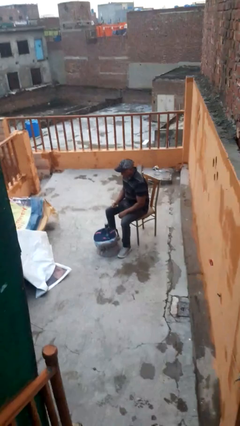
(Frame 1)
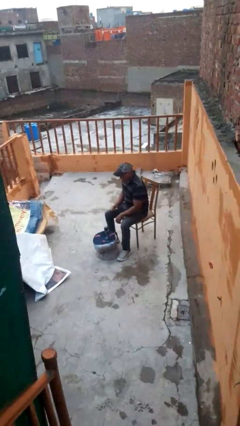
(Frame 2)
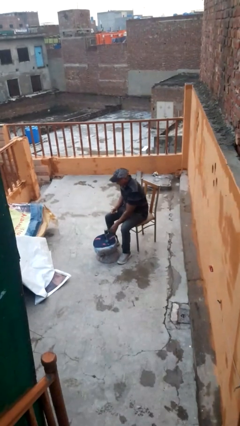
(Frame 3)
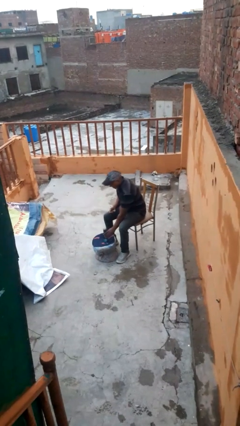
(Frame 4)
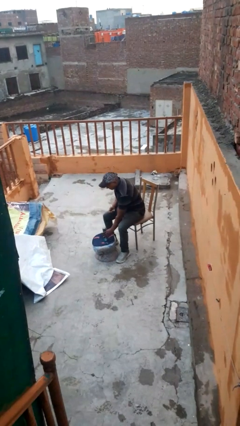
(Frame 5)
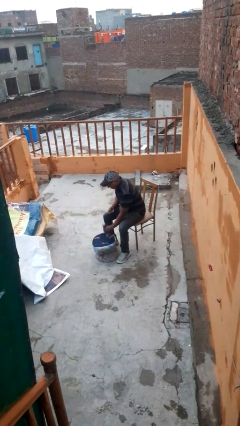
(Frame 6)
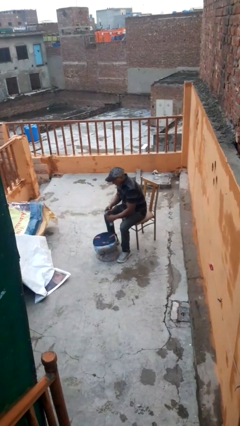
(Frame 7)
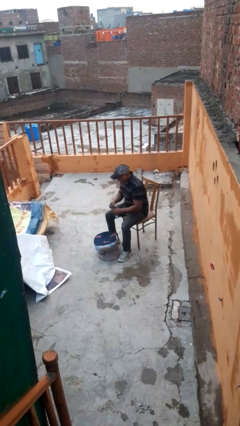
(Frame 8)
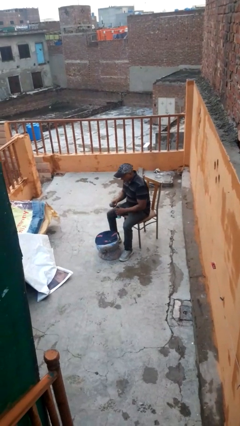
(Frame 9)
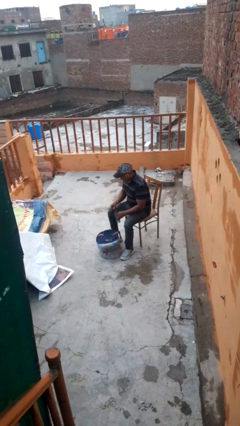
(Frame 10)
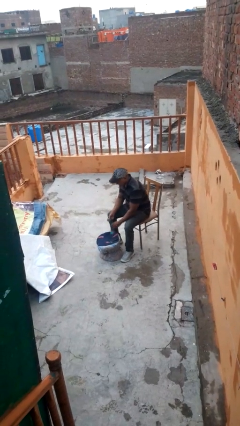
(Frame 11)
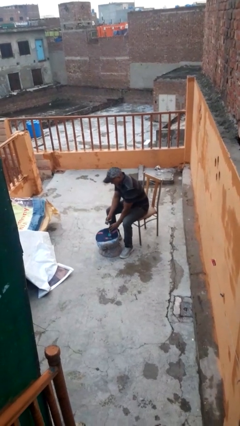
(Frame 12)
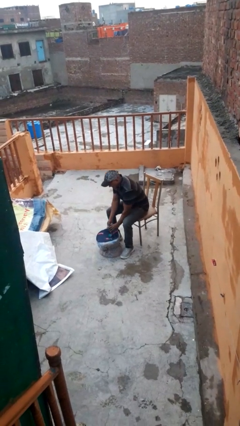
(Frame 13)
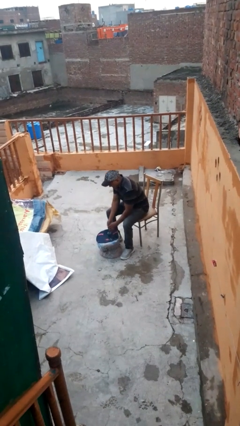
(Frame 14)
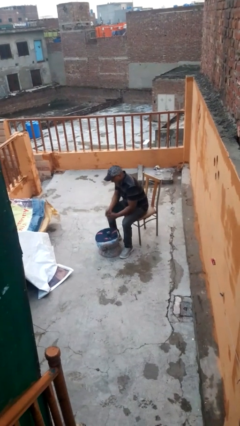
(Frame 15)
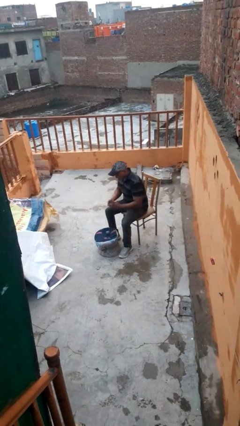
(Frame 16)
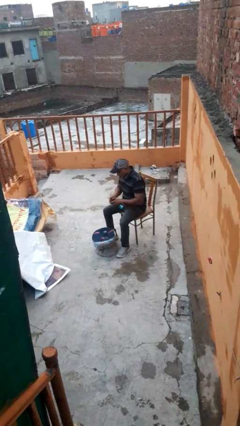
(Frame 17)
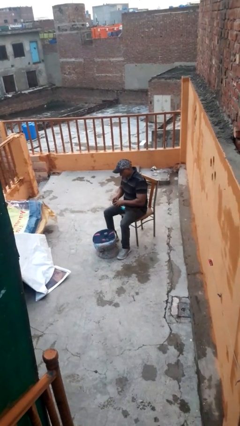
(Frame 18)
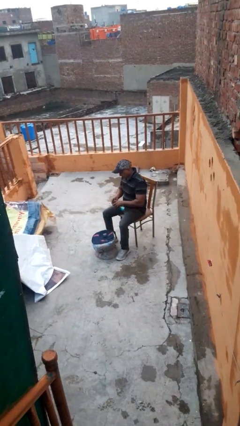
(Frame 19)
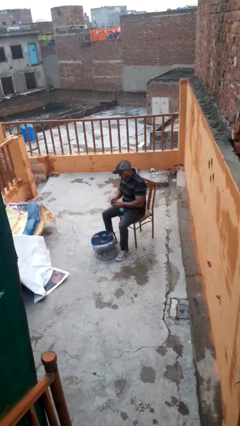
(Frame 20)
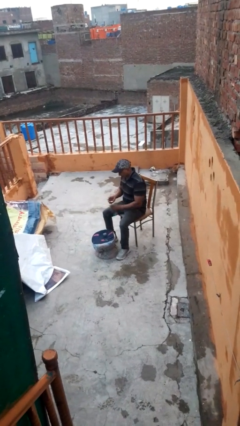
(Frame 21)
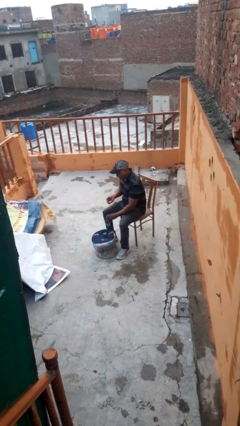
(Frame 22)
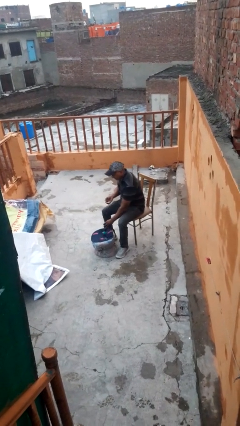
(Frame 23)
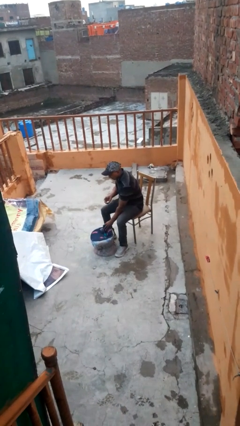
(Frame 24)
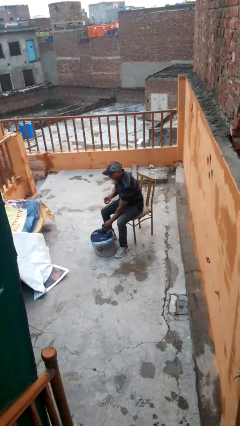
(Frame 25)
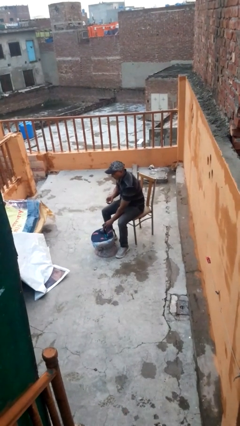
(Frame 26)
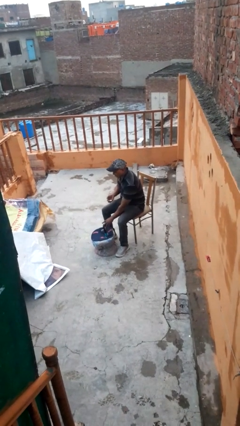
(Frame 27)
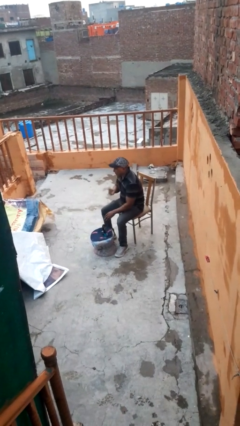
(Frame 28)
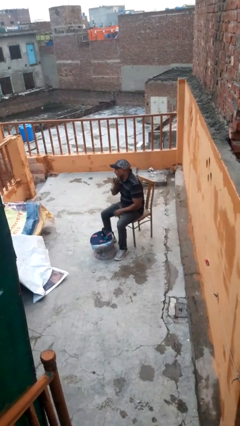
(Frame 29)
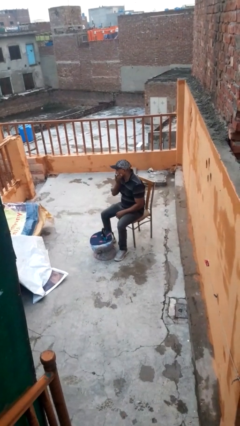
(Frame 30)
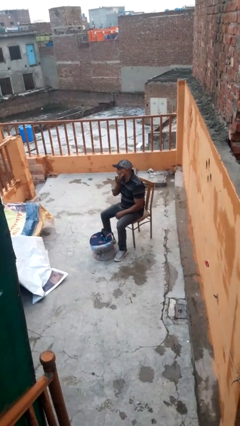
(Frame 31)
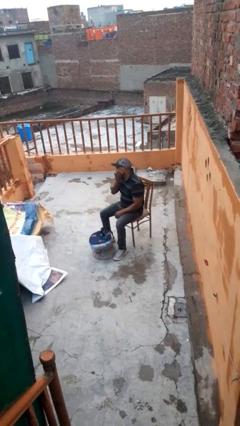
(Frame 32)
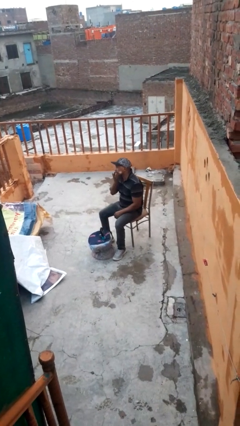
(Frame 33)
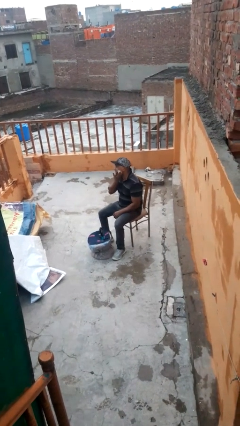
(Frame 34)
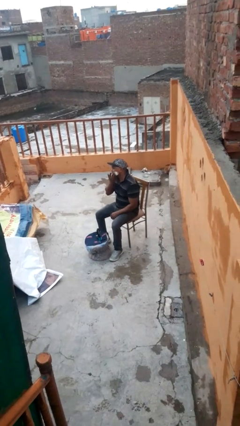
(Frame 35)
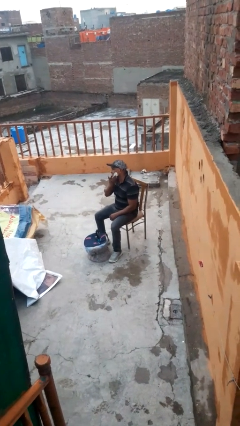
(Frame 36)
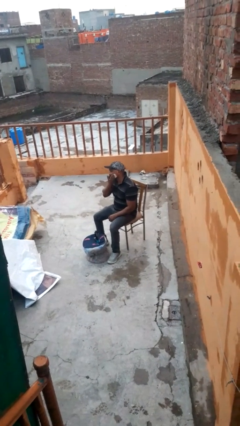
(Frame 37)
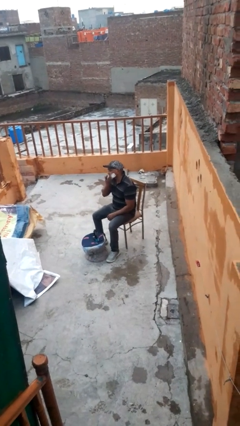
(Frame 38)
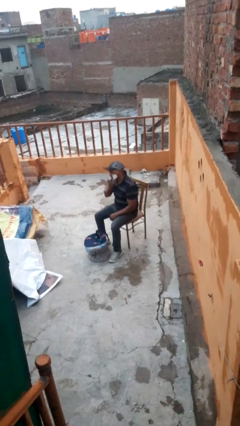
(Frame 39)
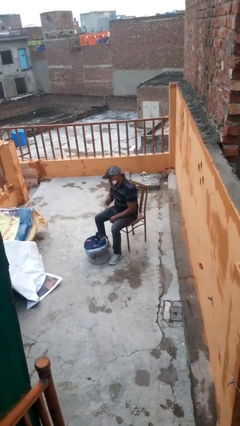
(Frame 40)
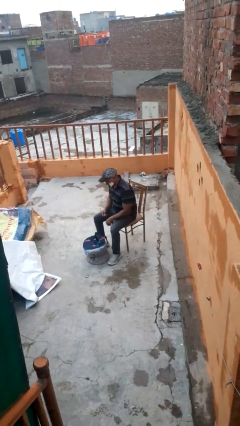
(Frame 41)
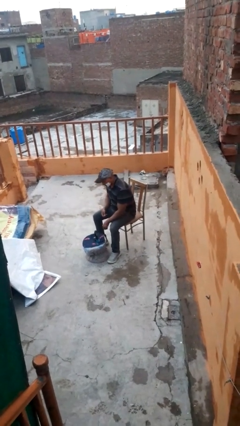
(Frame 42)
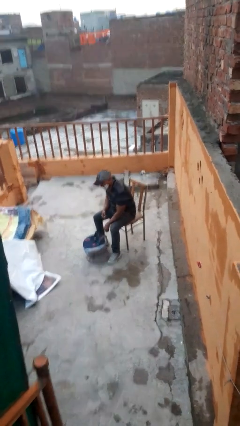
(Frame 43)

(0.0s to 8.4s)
person applies shaving cream

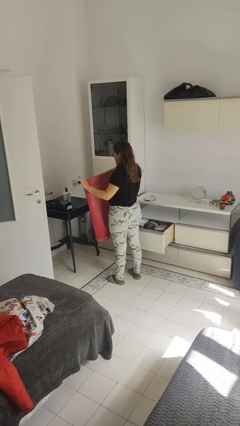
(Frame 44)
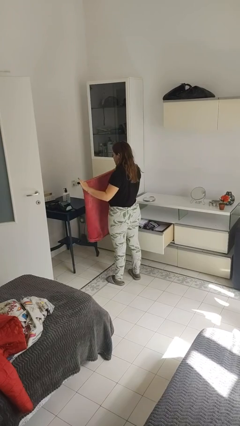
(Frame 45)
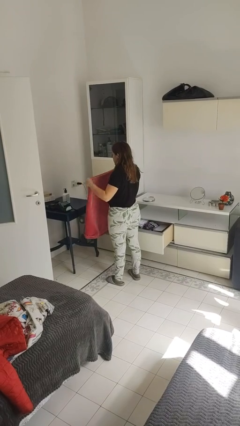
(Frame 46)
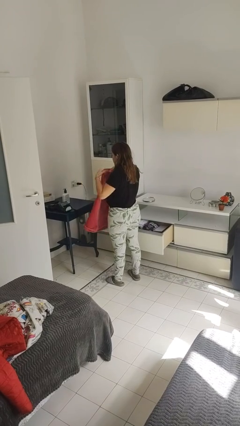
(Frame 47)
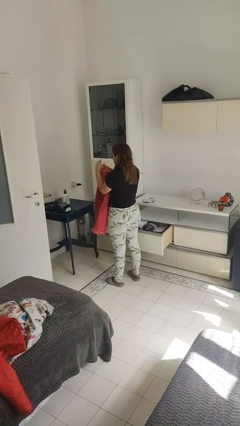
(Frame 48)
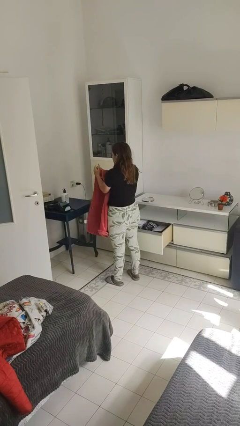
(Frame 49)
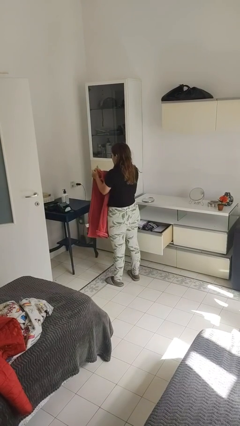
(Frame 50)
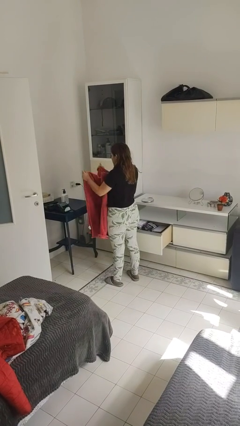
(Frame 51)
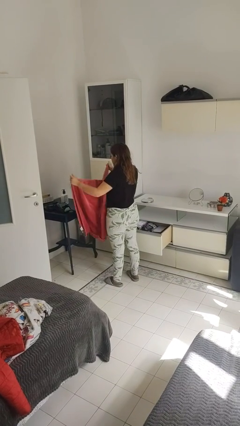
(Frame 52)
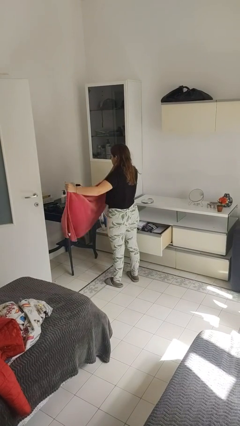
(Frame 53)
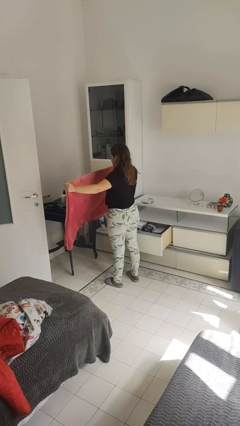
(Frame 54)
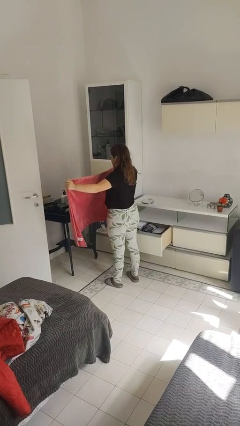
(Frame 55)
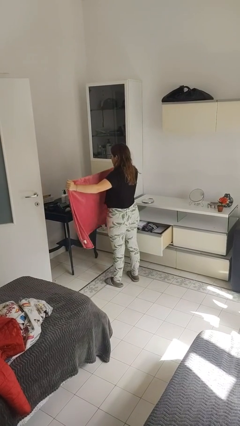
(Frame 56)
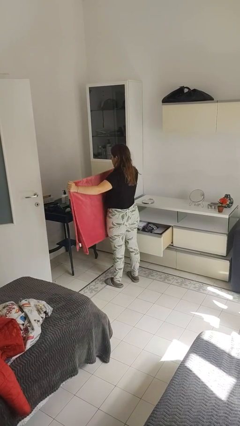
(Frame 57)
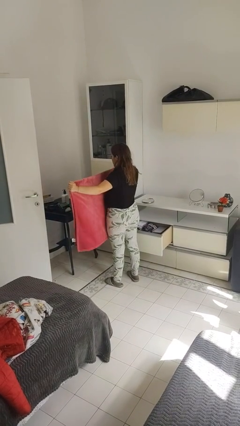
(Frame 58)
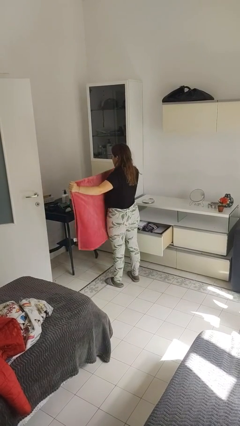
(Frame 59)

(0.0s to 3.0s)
person unfolds blanket

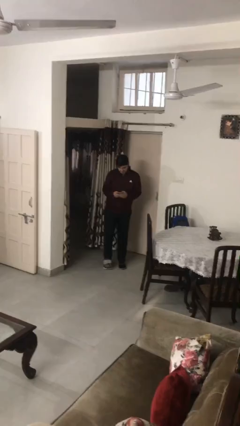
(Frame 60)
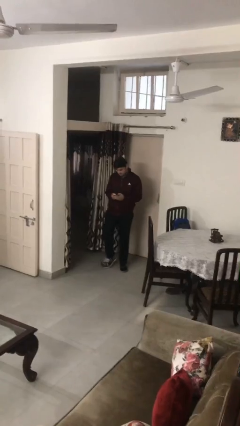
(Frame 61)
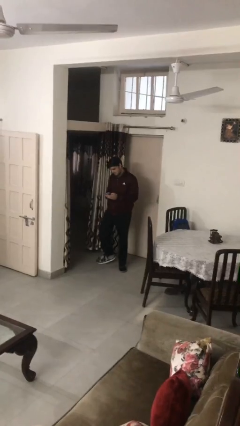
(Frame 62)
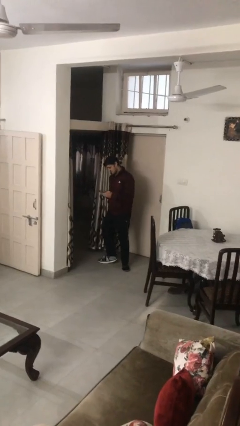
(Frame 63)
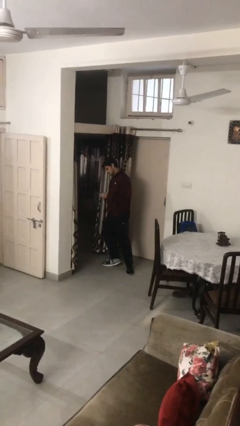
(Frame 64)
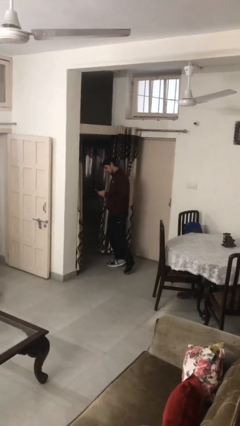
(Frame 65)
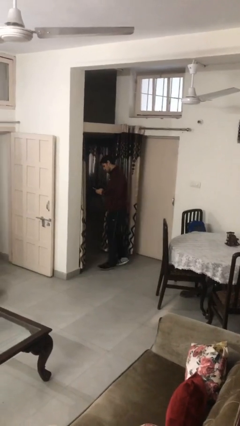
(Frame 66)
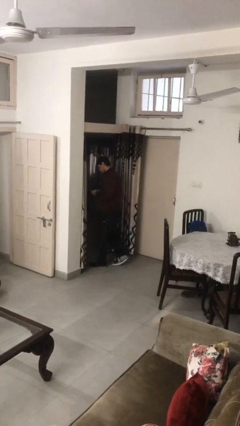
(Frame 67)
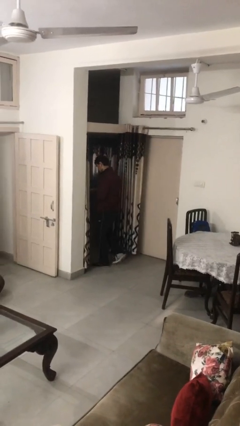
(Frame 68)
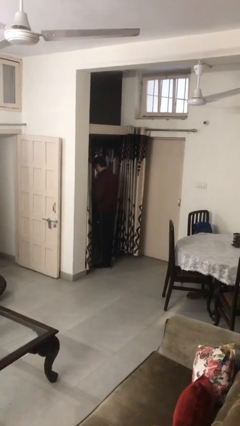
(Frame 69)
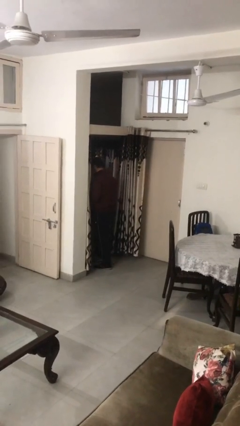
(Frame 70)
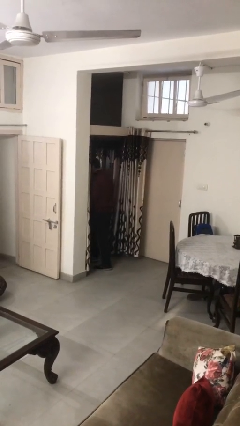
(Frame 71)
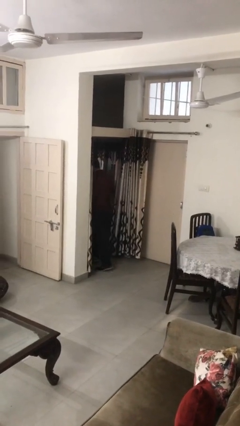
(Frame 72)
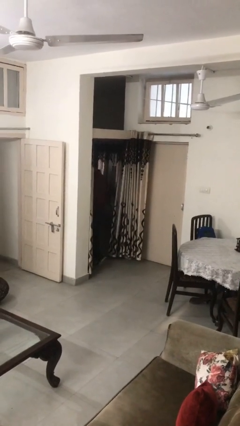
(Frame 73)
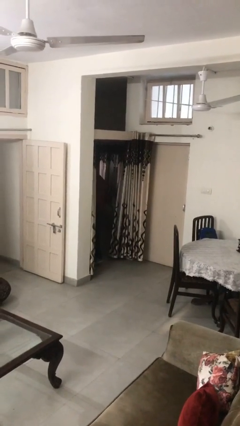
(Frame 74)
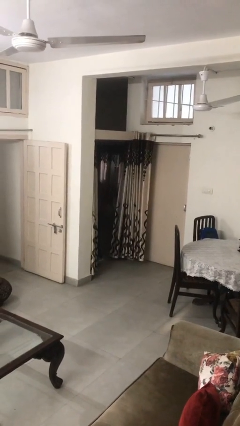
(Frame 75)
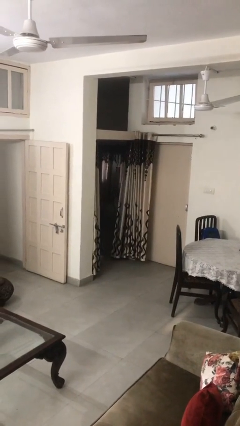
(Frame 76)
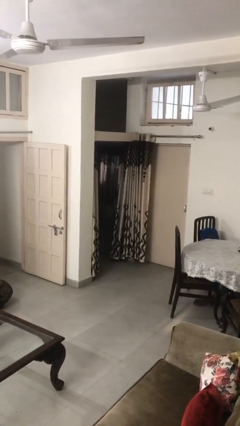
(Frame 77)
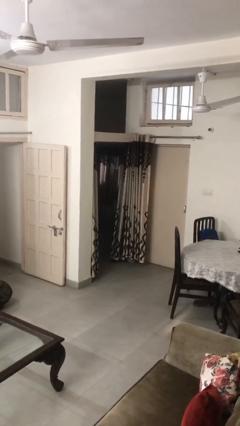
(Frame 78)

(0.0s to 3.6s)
person exits scene through structure

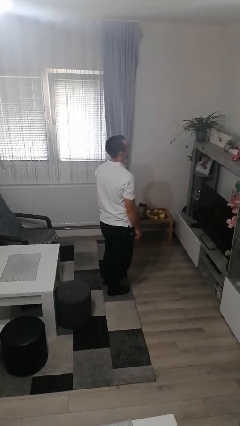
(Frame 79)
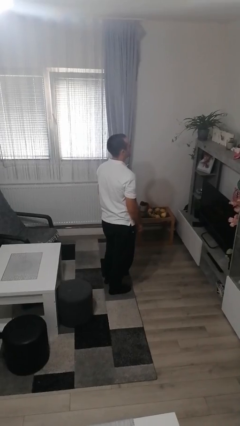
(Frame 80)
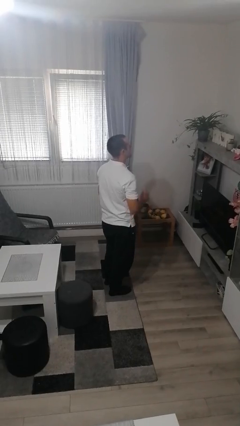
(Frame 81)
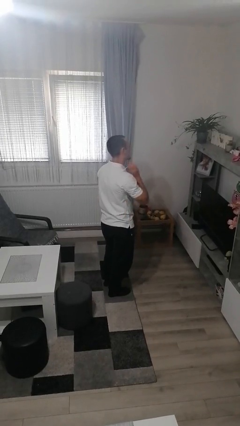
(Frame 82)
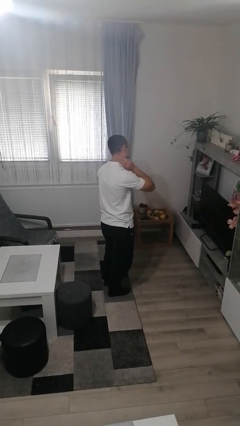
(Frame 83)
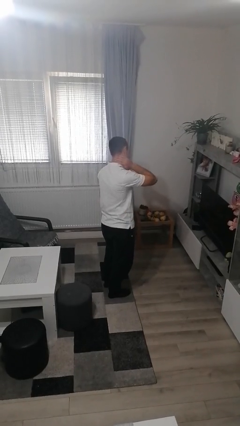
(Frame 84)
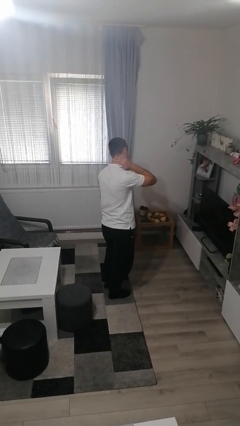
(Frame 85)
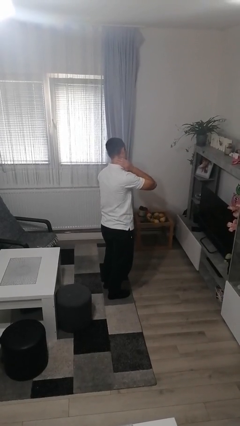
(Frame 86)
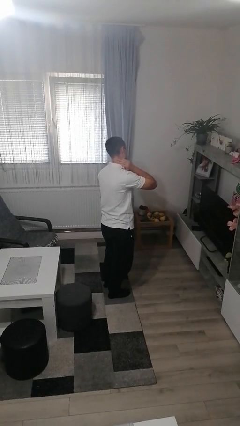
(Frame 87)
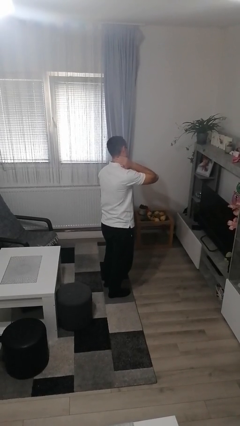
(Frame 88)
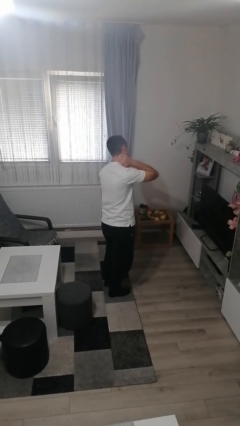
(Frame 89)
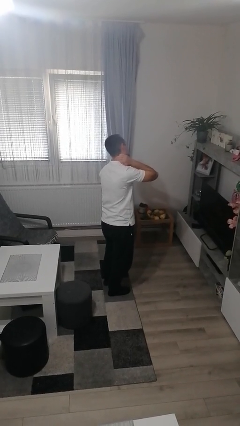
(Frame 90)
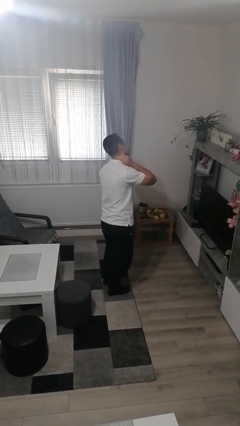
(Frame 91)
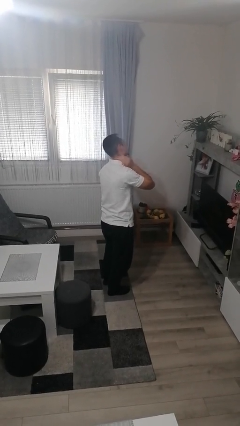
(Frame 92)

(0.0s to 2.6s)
person rubs neck

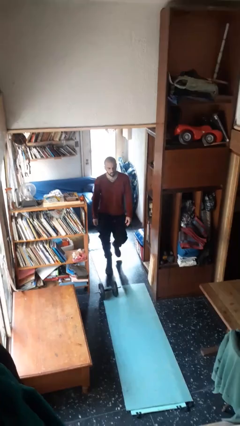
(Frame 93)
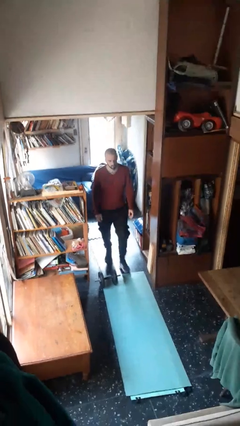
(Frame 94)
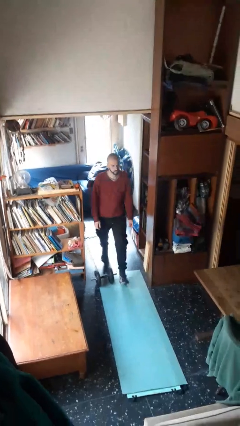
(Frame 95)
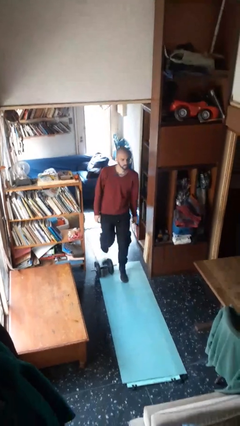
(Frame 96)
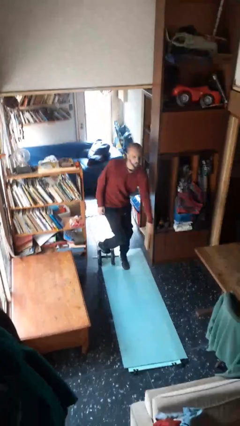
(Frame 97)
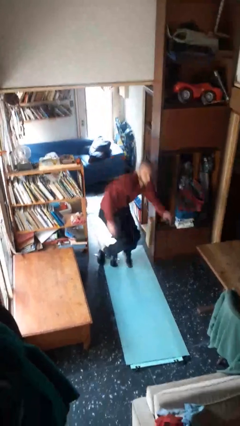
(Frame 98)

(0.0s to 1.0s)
person trips on object on floor
